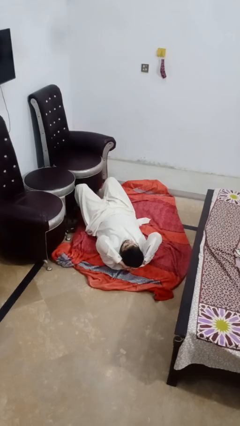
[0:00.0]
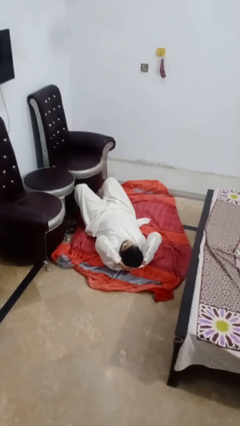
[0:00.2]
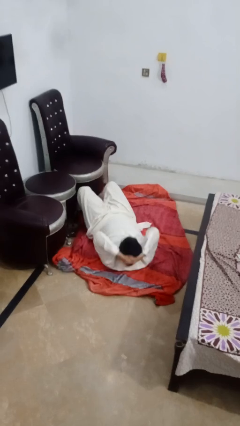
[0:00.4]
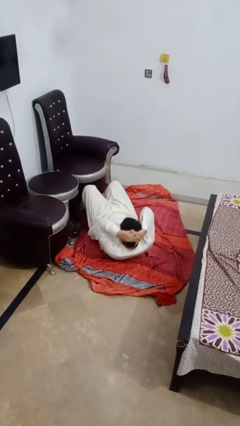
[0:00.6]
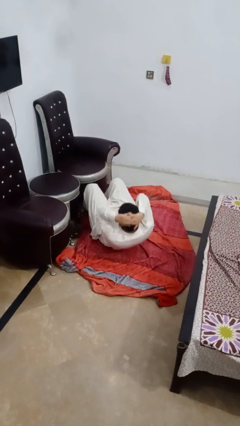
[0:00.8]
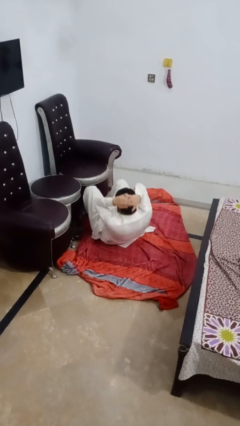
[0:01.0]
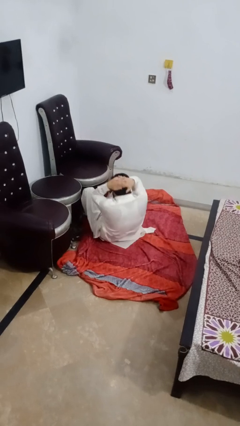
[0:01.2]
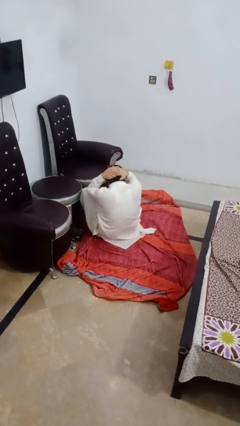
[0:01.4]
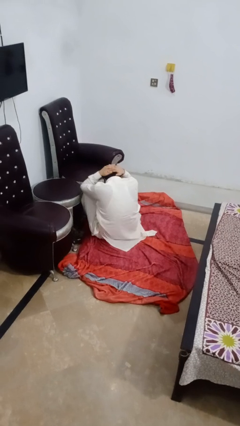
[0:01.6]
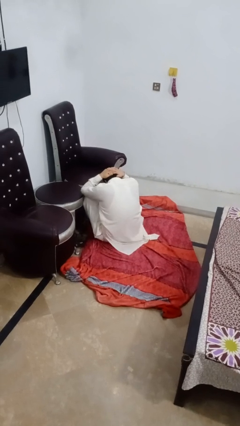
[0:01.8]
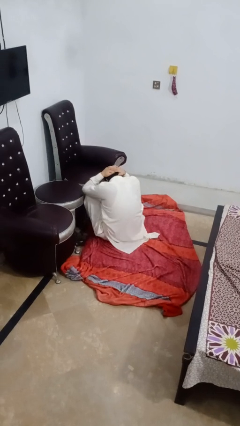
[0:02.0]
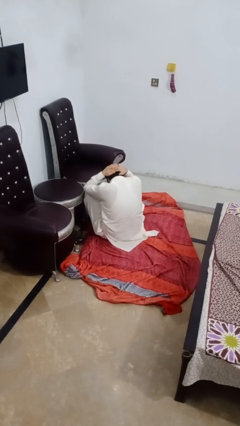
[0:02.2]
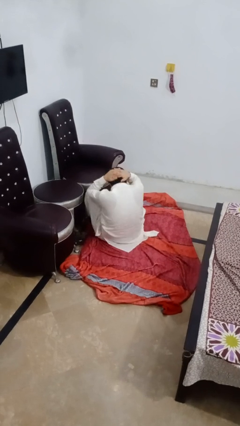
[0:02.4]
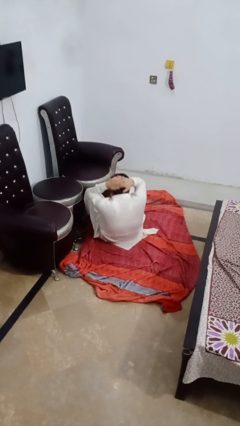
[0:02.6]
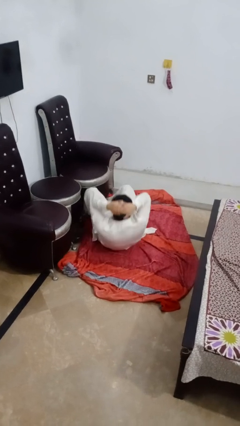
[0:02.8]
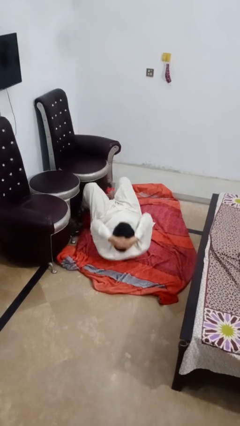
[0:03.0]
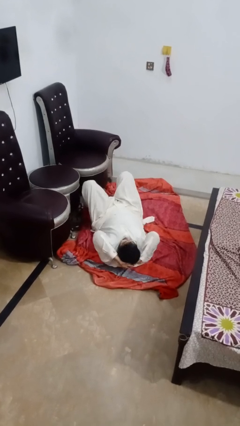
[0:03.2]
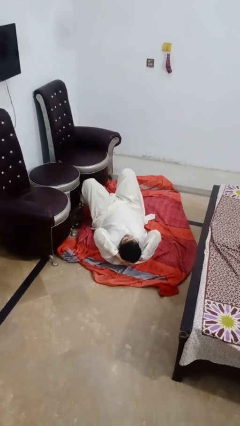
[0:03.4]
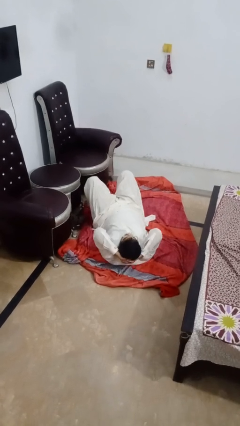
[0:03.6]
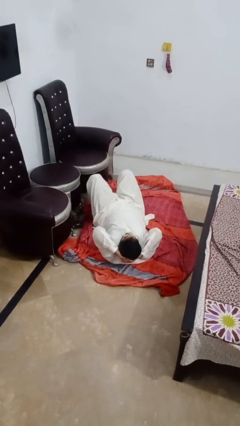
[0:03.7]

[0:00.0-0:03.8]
person exercises with situp

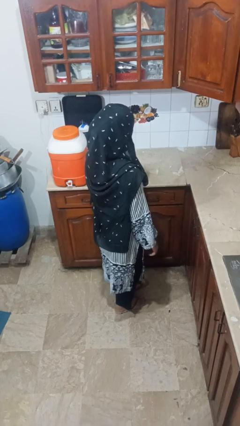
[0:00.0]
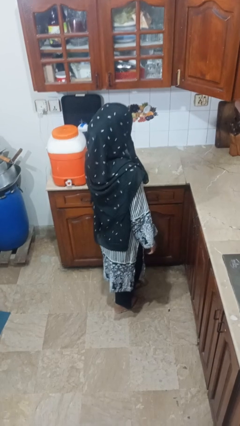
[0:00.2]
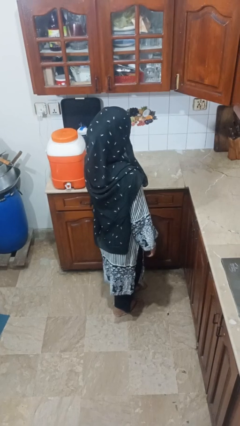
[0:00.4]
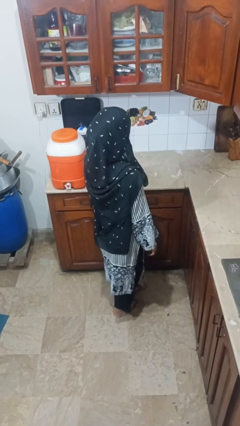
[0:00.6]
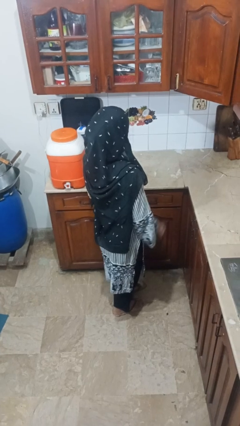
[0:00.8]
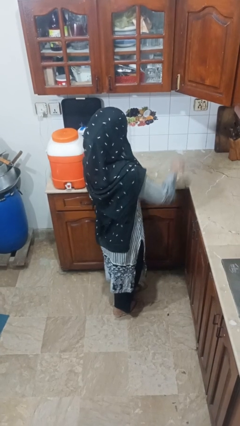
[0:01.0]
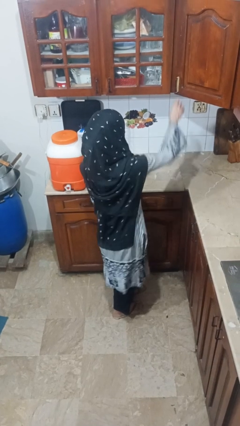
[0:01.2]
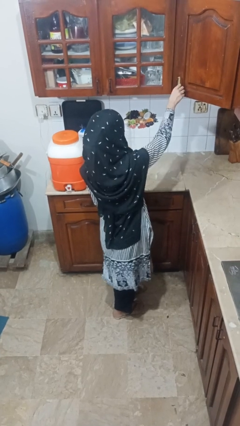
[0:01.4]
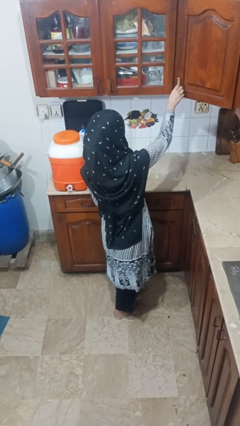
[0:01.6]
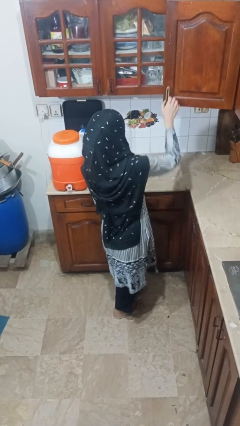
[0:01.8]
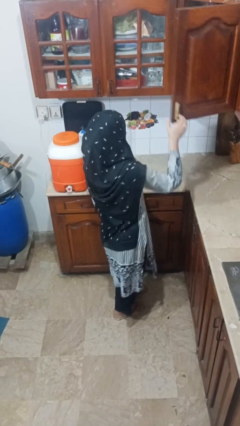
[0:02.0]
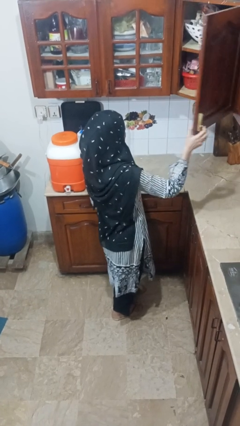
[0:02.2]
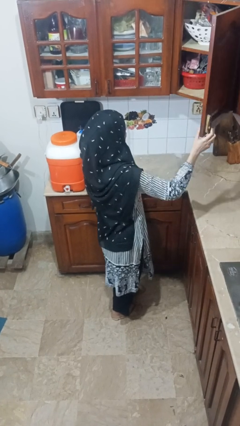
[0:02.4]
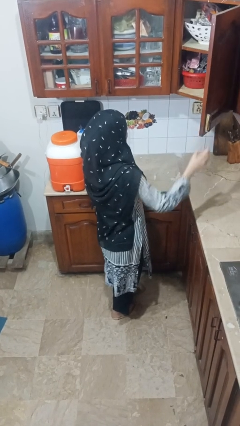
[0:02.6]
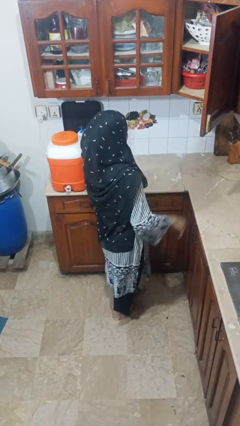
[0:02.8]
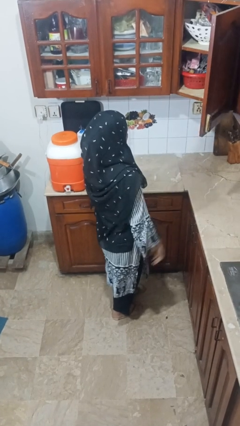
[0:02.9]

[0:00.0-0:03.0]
person opens cabinet

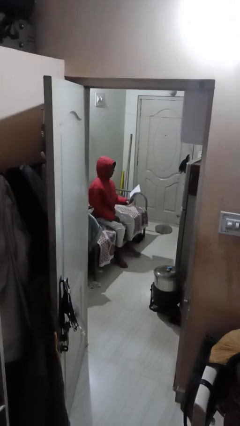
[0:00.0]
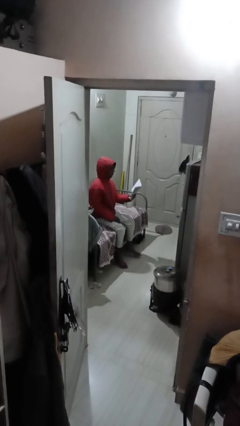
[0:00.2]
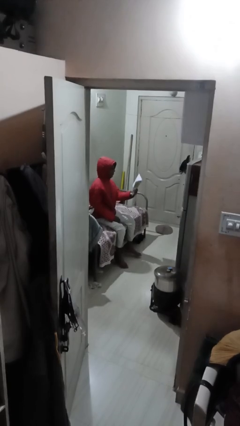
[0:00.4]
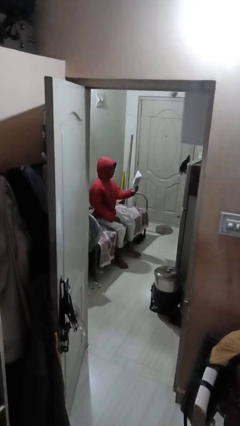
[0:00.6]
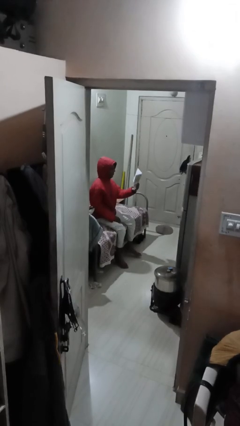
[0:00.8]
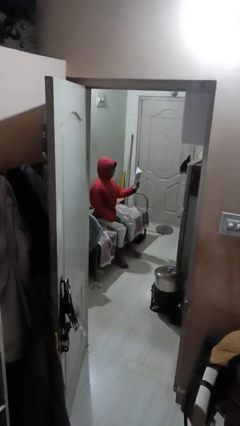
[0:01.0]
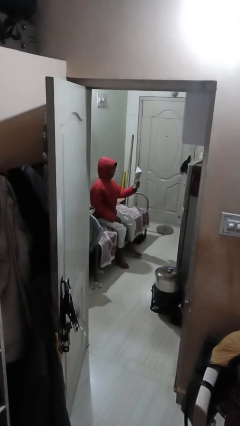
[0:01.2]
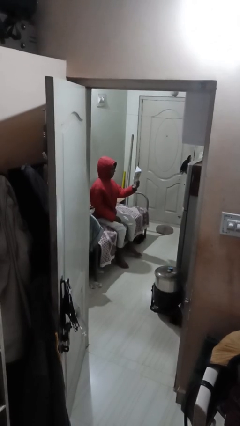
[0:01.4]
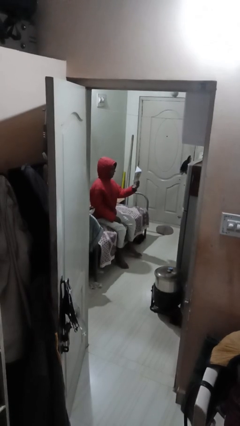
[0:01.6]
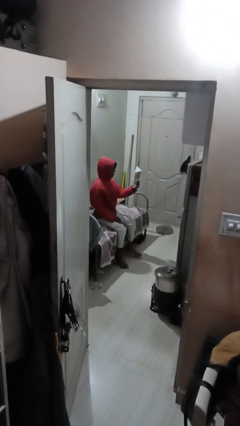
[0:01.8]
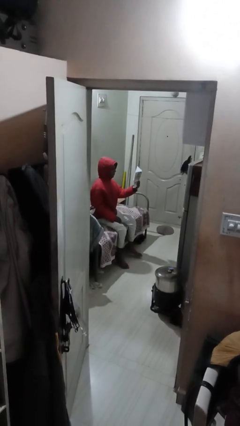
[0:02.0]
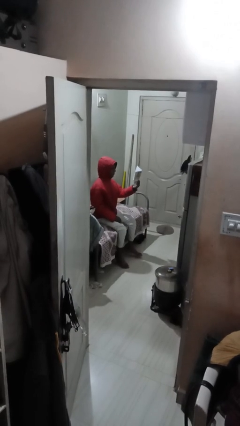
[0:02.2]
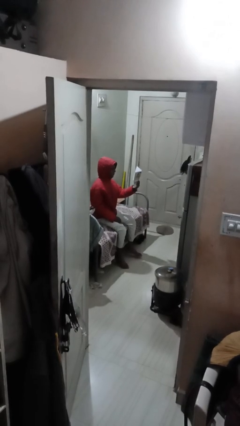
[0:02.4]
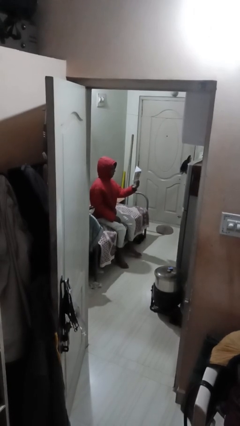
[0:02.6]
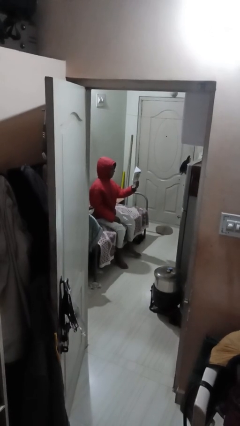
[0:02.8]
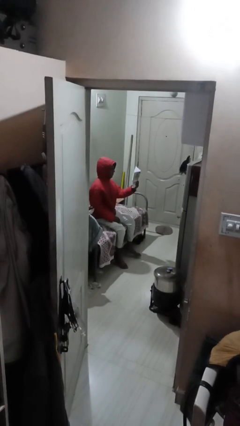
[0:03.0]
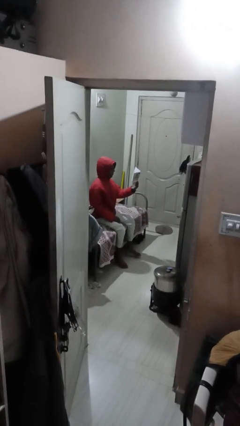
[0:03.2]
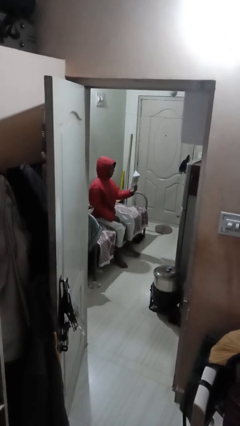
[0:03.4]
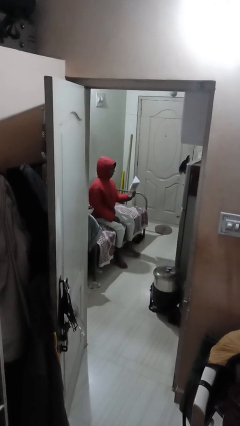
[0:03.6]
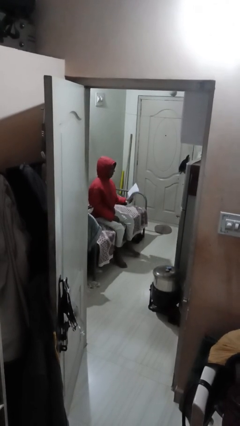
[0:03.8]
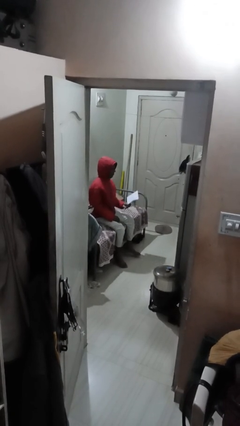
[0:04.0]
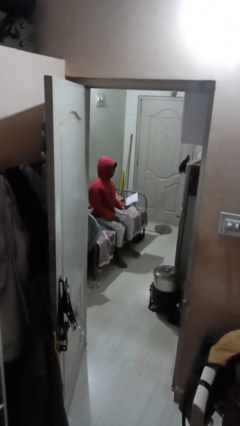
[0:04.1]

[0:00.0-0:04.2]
person reads document

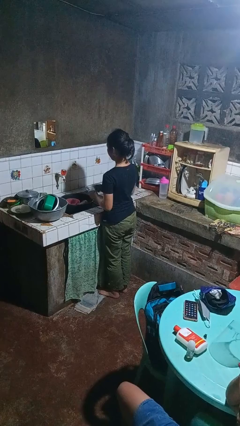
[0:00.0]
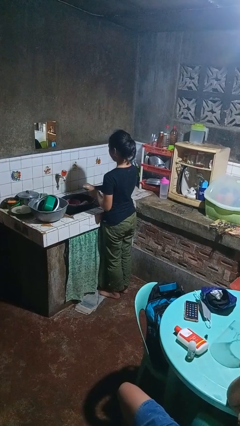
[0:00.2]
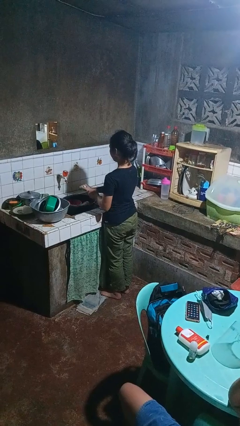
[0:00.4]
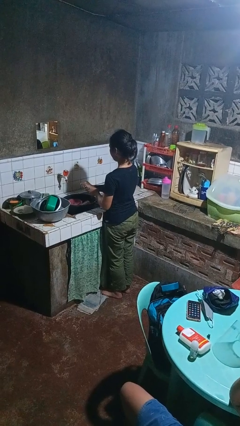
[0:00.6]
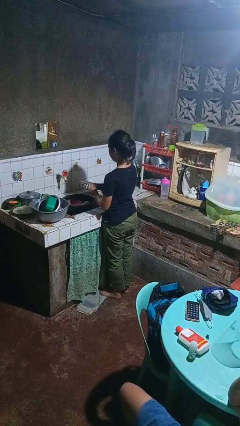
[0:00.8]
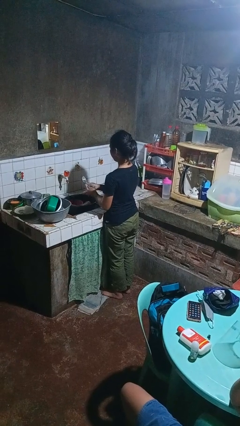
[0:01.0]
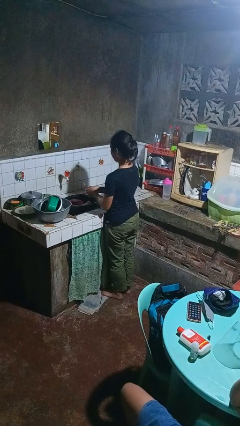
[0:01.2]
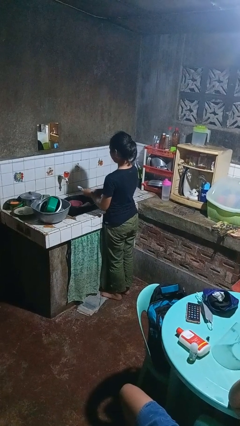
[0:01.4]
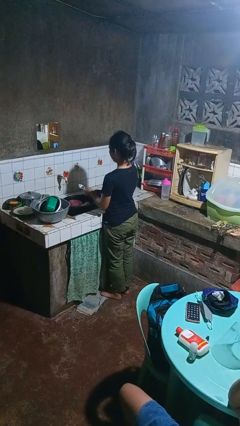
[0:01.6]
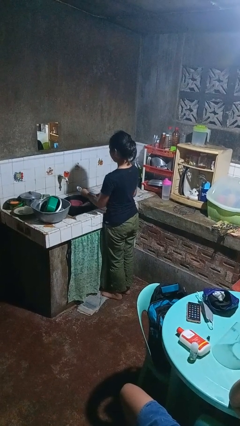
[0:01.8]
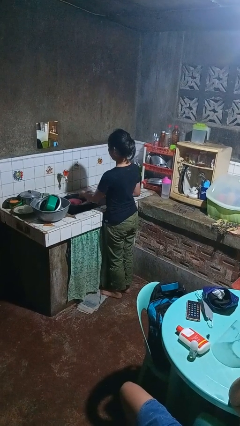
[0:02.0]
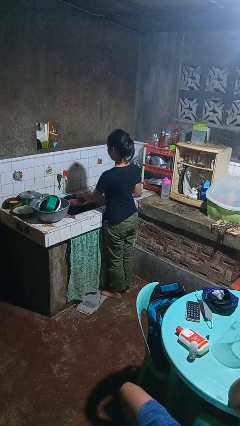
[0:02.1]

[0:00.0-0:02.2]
person washes dish

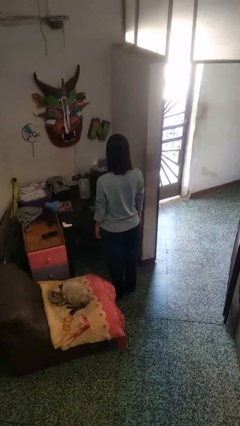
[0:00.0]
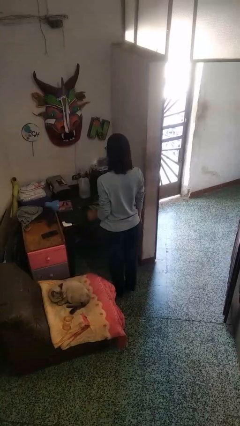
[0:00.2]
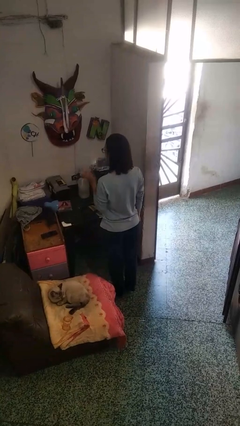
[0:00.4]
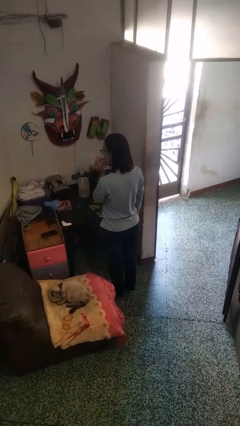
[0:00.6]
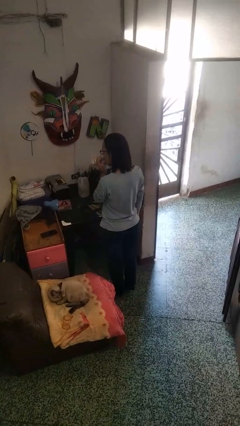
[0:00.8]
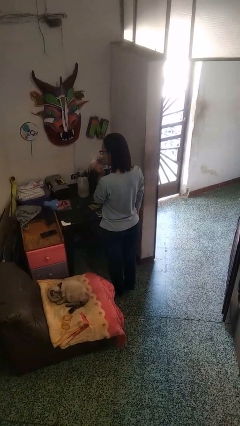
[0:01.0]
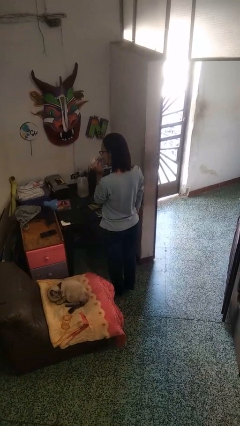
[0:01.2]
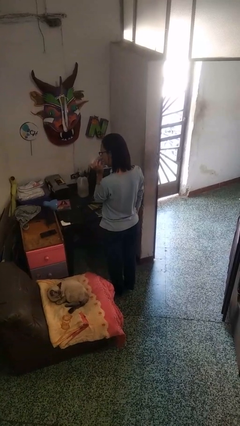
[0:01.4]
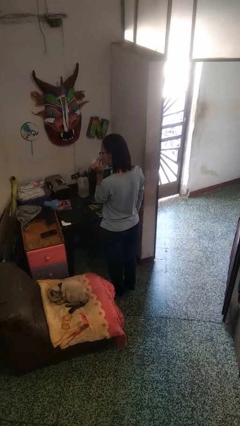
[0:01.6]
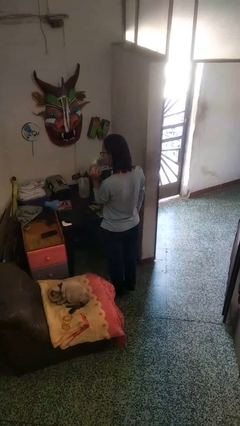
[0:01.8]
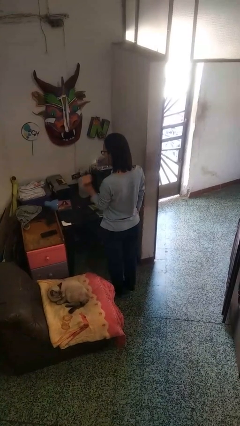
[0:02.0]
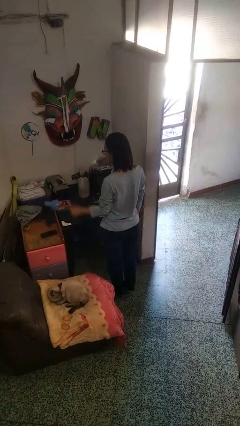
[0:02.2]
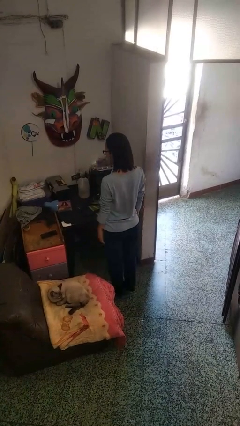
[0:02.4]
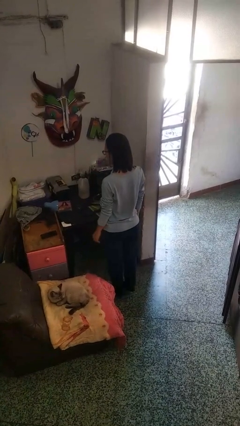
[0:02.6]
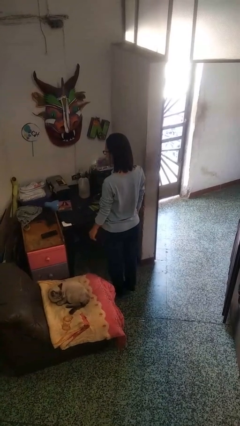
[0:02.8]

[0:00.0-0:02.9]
person licks fingers

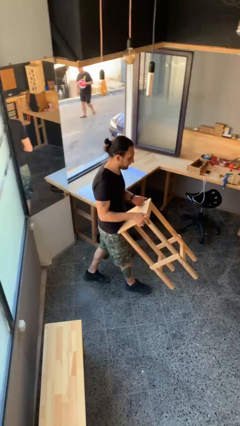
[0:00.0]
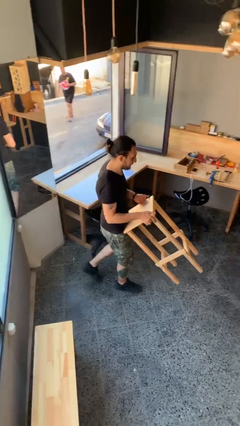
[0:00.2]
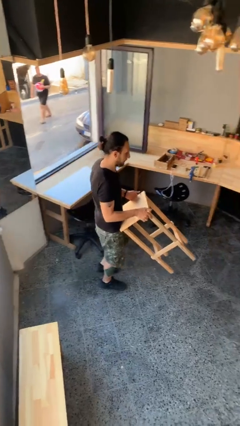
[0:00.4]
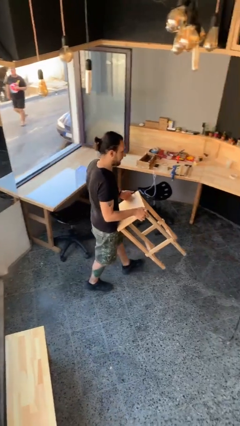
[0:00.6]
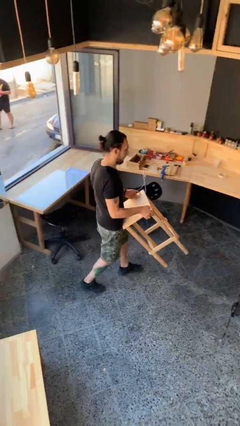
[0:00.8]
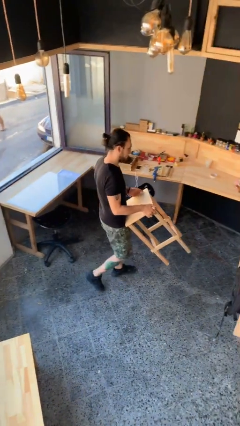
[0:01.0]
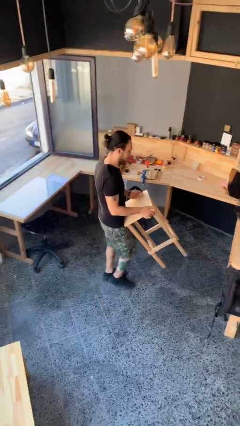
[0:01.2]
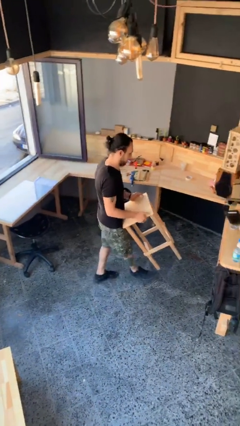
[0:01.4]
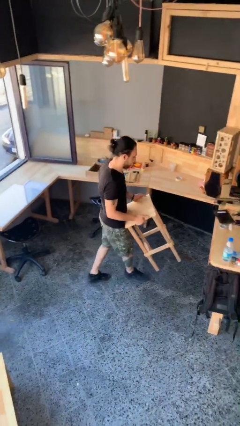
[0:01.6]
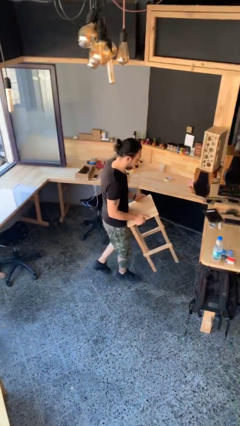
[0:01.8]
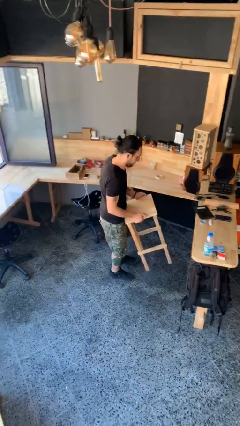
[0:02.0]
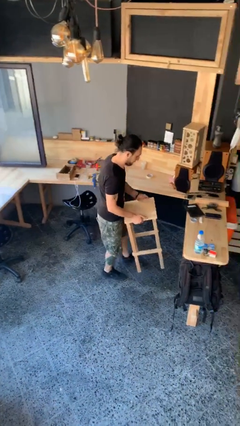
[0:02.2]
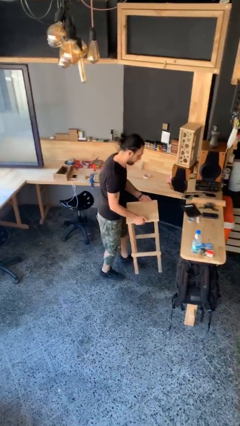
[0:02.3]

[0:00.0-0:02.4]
person carries heavy object
